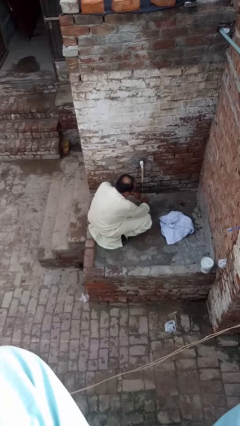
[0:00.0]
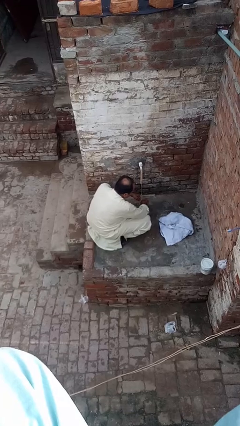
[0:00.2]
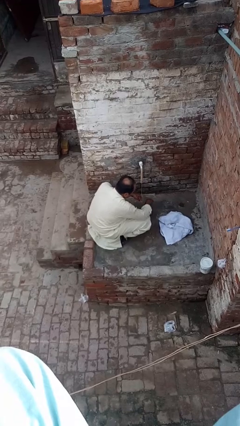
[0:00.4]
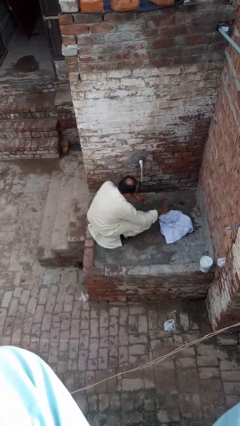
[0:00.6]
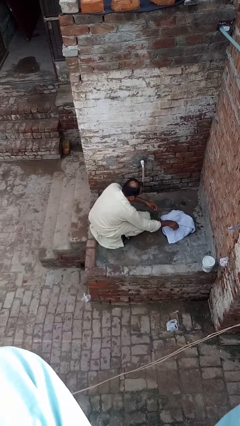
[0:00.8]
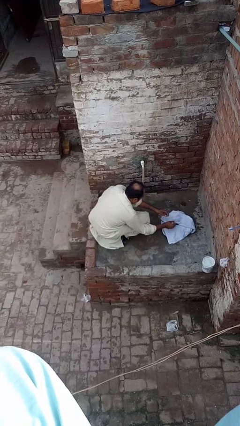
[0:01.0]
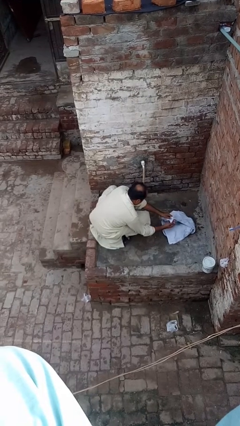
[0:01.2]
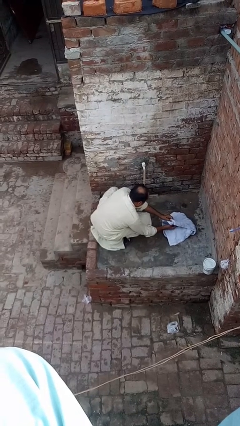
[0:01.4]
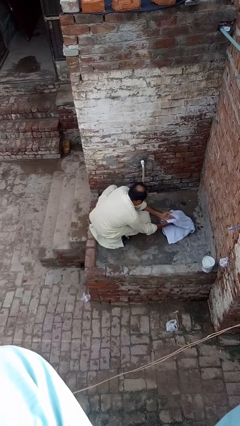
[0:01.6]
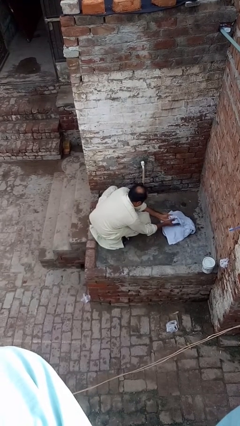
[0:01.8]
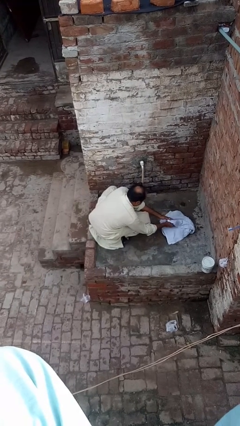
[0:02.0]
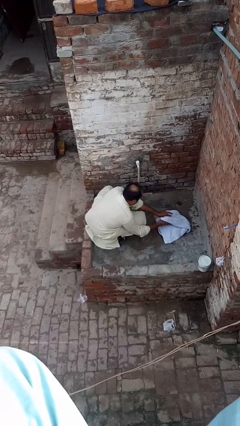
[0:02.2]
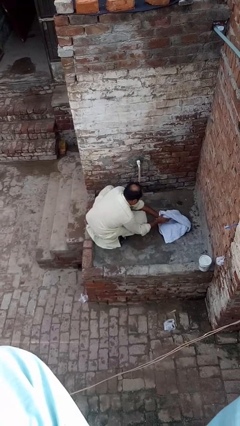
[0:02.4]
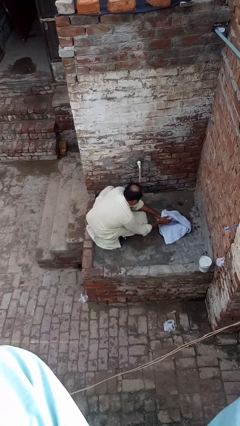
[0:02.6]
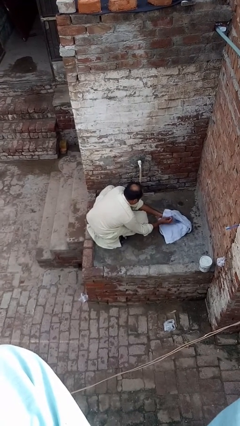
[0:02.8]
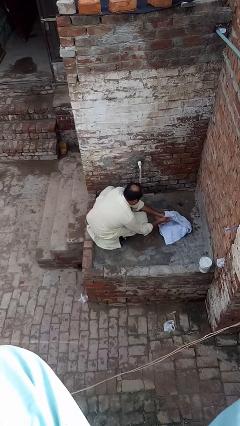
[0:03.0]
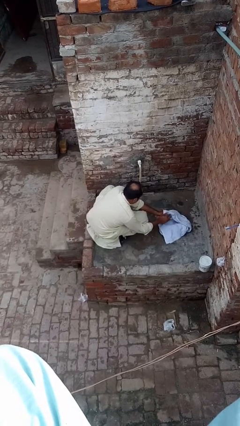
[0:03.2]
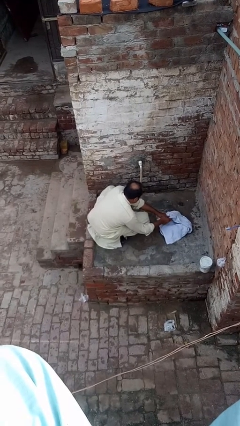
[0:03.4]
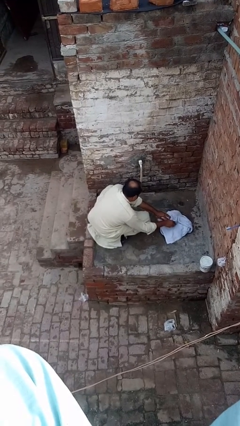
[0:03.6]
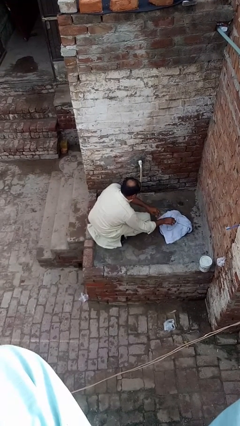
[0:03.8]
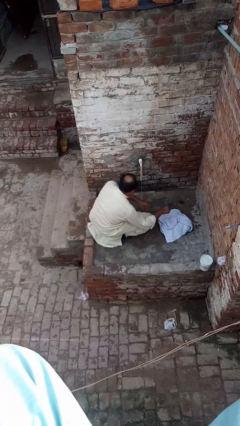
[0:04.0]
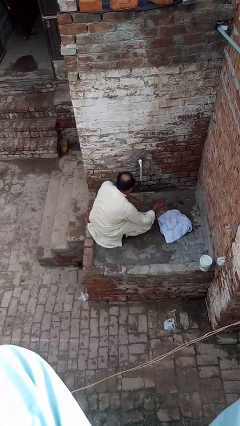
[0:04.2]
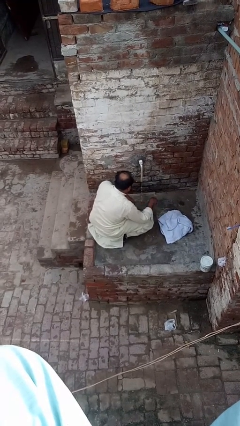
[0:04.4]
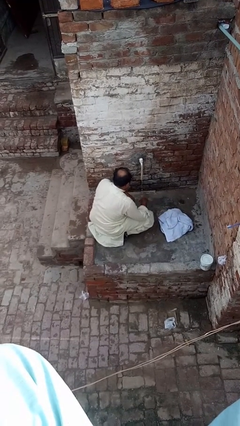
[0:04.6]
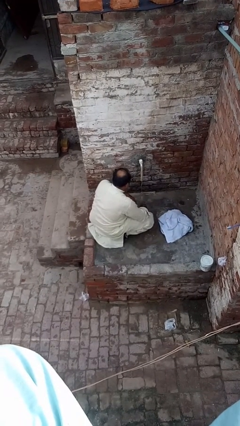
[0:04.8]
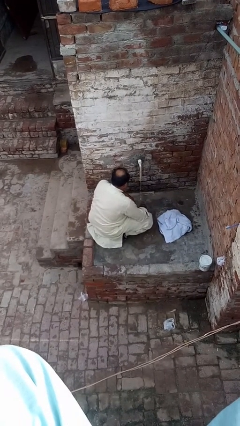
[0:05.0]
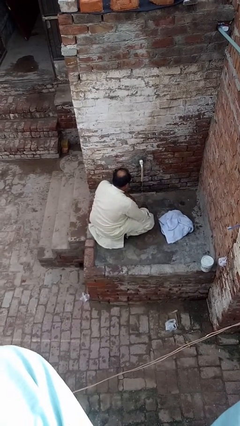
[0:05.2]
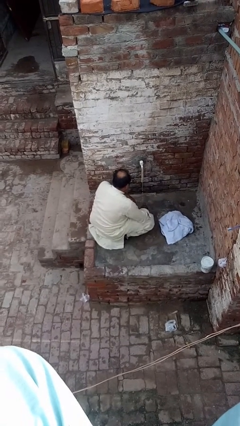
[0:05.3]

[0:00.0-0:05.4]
person dries hands with towel

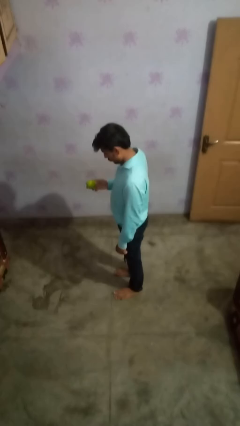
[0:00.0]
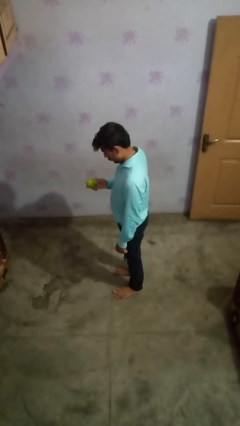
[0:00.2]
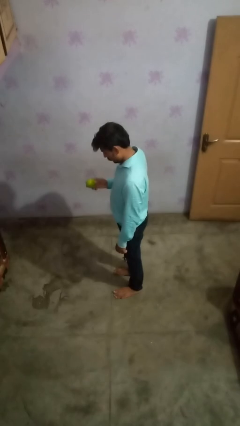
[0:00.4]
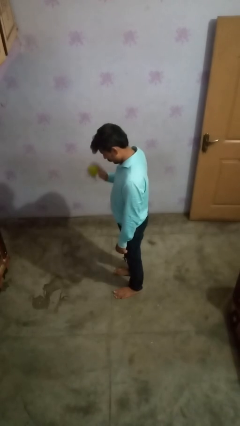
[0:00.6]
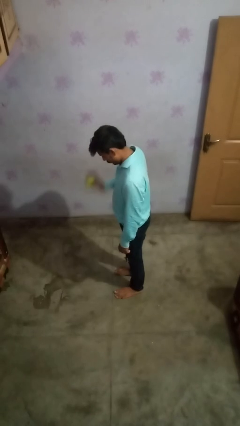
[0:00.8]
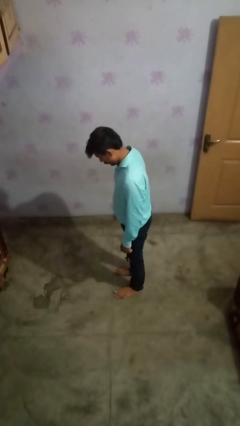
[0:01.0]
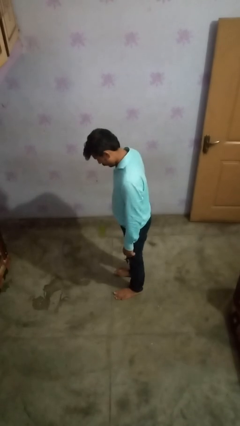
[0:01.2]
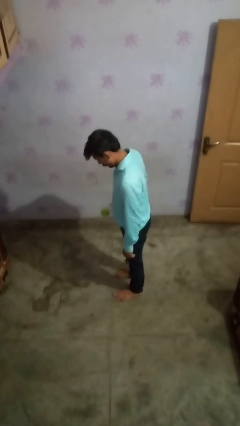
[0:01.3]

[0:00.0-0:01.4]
person bounces ball on floor

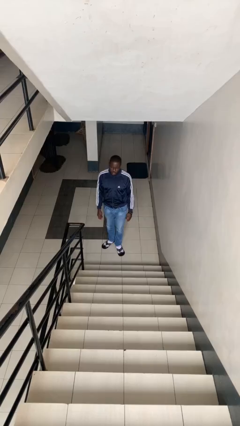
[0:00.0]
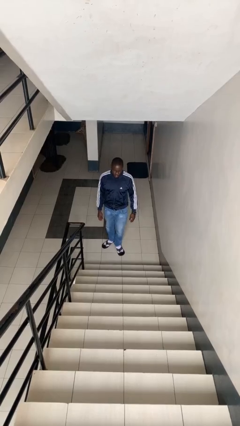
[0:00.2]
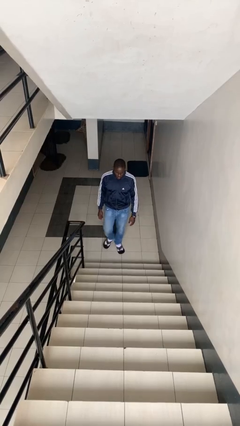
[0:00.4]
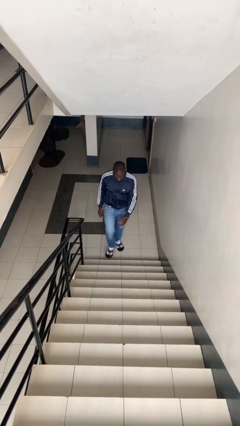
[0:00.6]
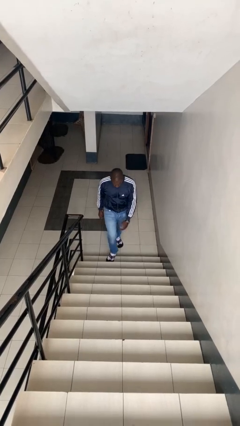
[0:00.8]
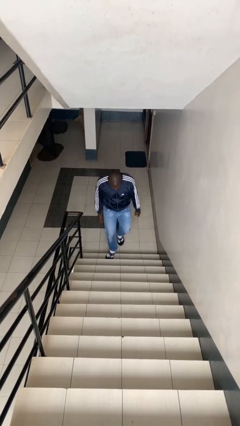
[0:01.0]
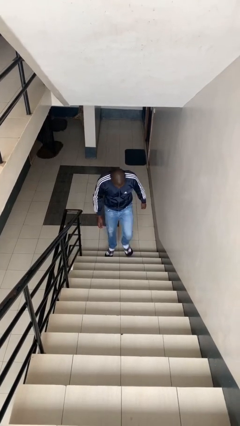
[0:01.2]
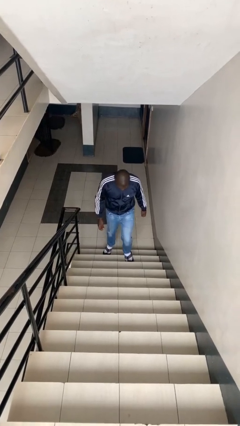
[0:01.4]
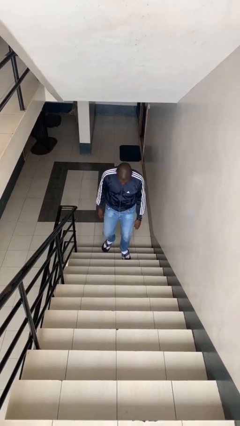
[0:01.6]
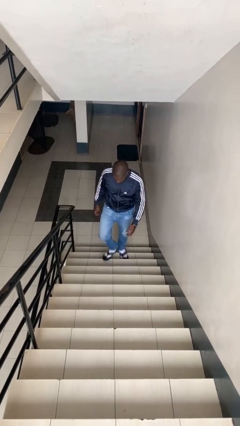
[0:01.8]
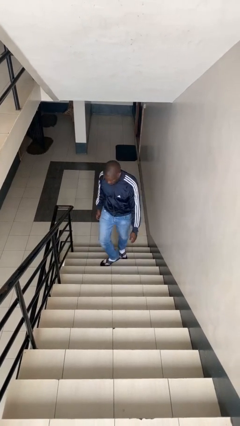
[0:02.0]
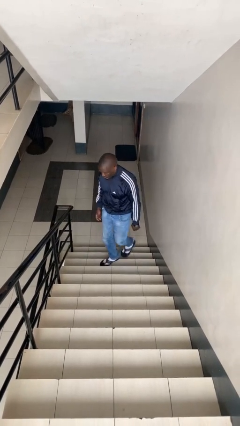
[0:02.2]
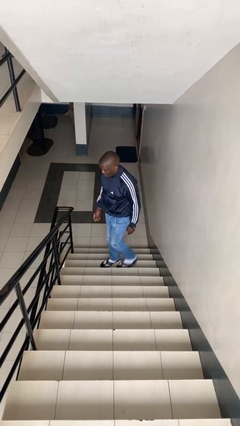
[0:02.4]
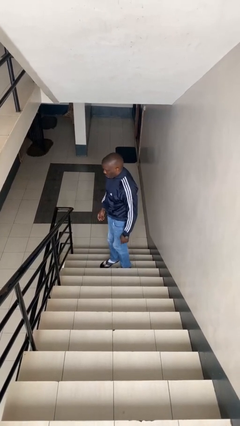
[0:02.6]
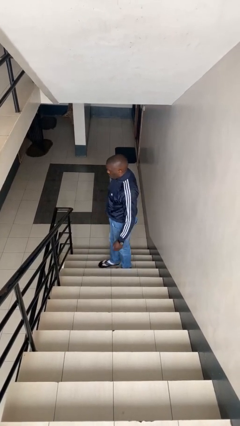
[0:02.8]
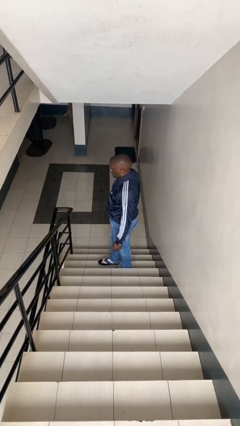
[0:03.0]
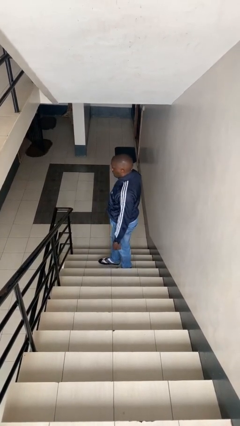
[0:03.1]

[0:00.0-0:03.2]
person climbs up stairs

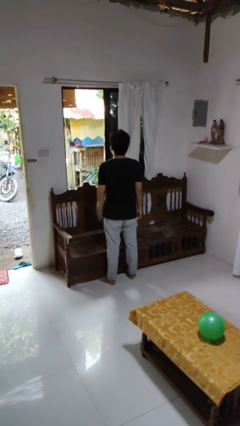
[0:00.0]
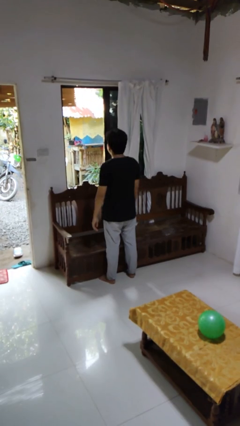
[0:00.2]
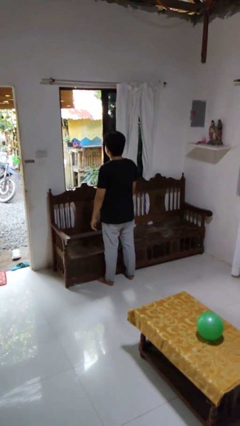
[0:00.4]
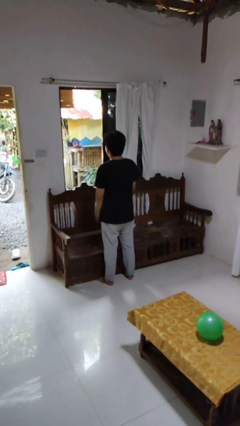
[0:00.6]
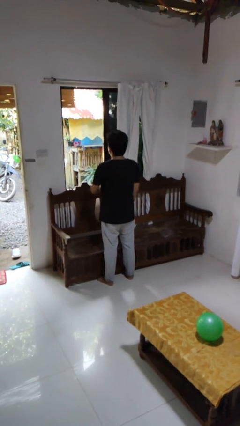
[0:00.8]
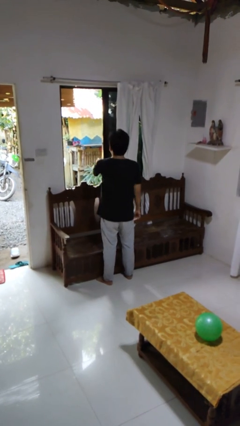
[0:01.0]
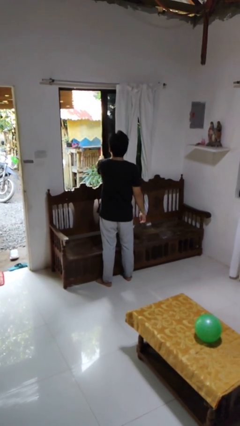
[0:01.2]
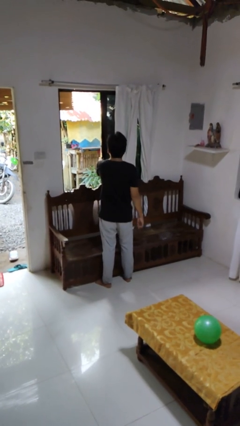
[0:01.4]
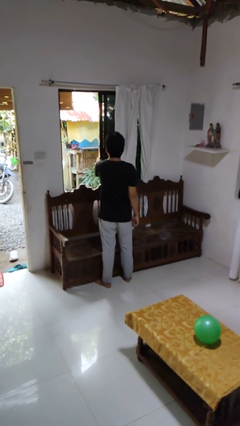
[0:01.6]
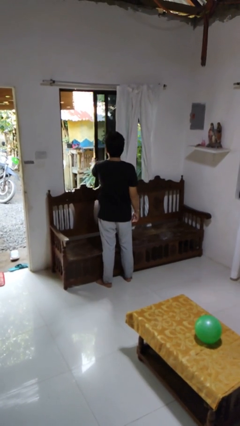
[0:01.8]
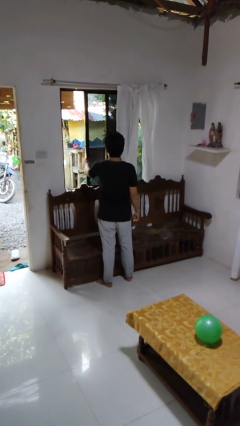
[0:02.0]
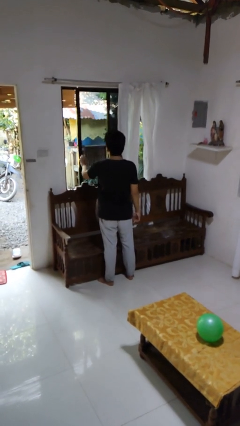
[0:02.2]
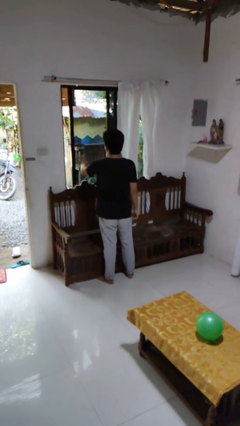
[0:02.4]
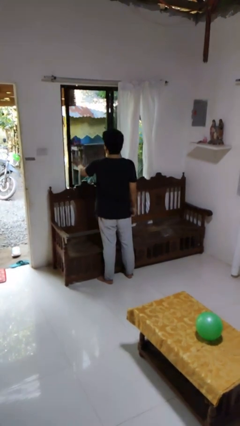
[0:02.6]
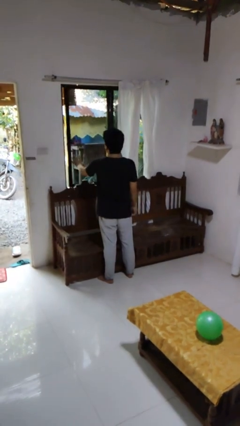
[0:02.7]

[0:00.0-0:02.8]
person closes home window

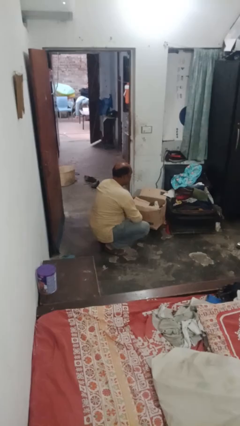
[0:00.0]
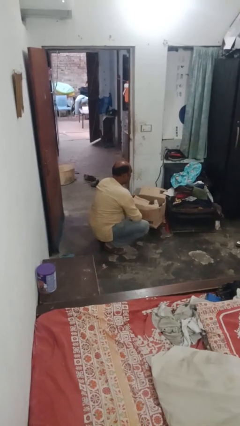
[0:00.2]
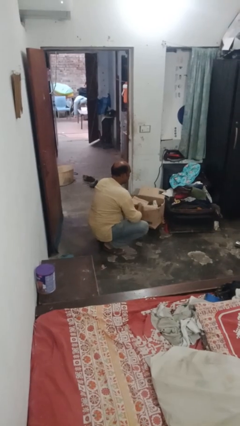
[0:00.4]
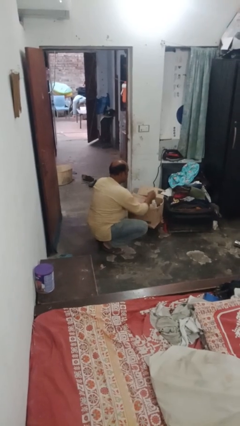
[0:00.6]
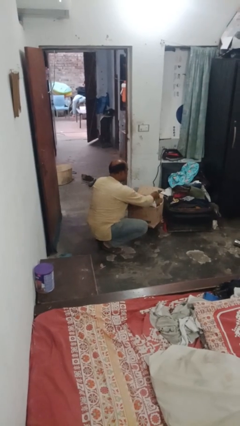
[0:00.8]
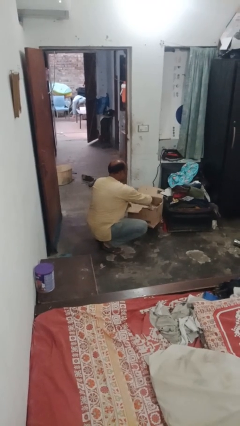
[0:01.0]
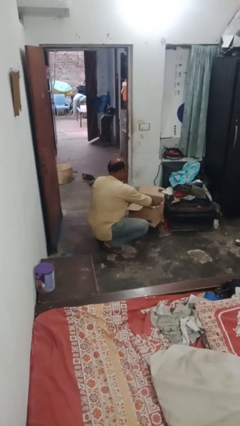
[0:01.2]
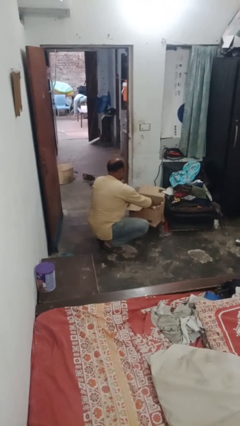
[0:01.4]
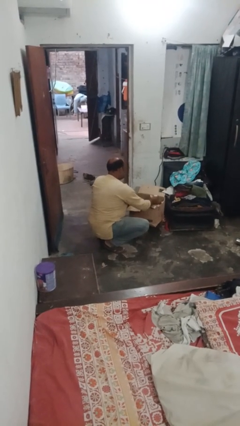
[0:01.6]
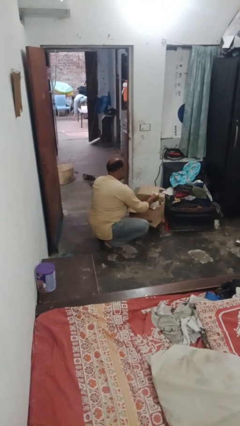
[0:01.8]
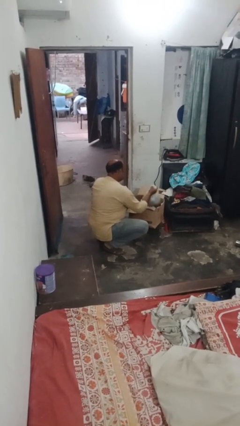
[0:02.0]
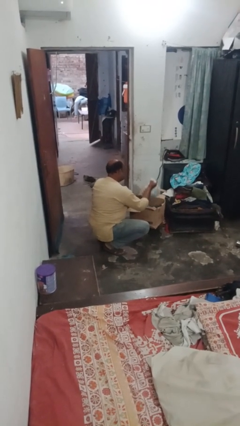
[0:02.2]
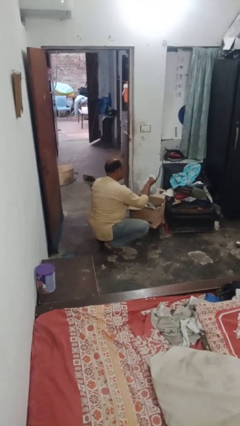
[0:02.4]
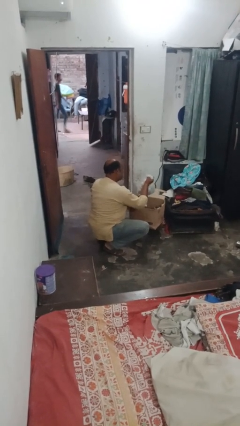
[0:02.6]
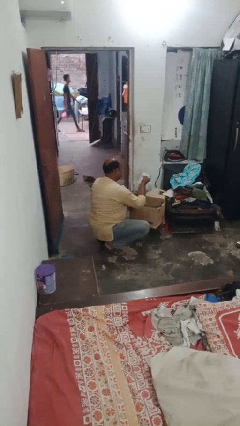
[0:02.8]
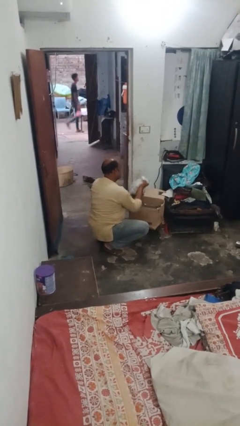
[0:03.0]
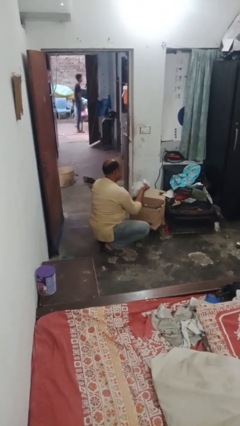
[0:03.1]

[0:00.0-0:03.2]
person takes object from box

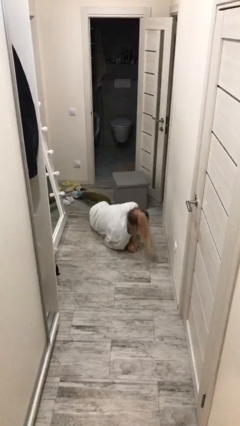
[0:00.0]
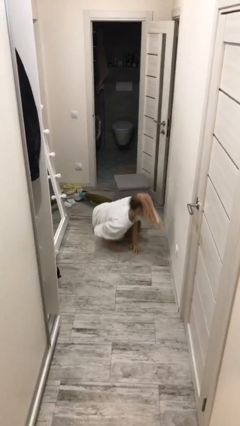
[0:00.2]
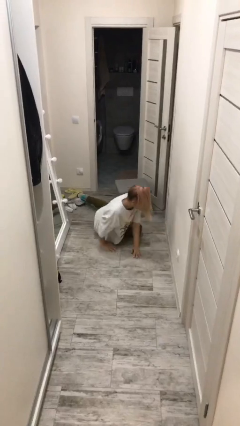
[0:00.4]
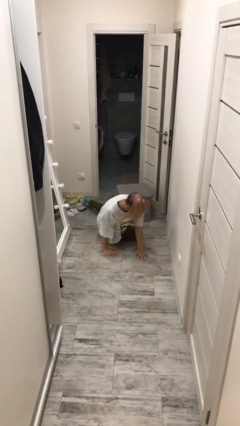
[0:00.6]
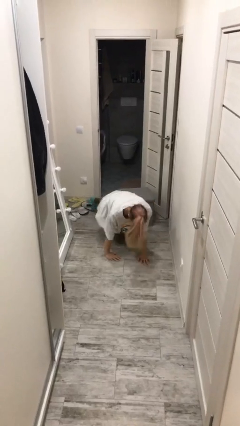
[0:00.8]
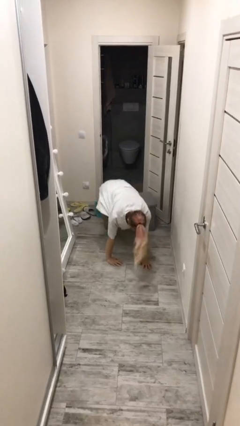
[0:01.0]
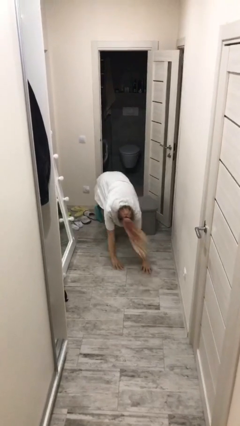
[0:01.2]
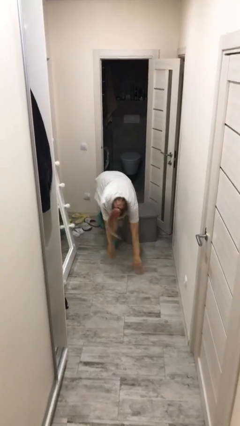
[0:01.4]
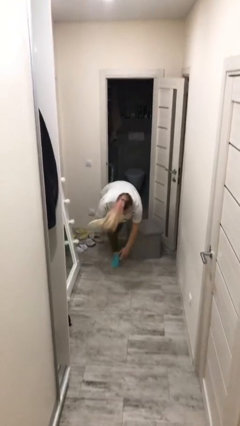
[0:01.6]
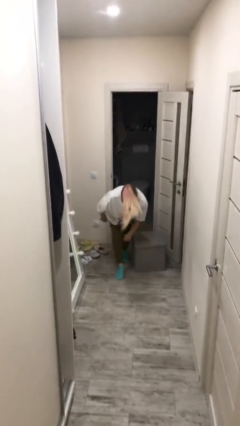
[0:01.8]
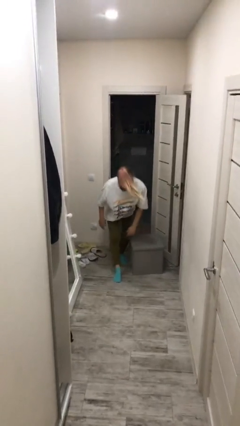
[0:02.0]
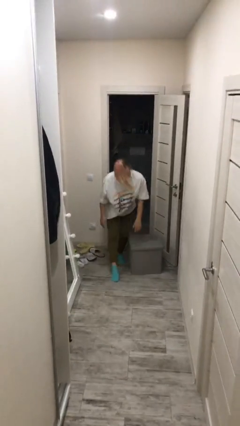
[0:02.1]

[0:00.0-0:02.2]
person stands up from floor
